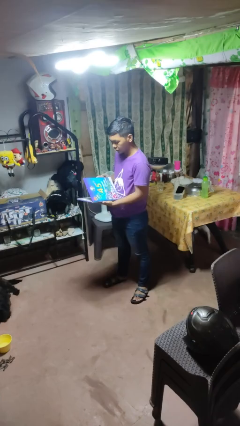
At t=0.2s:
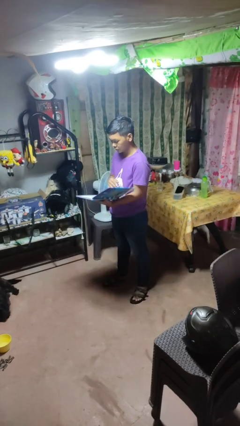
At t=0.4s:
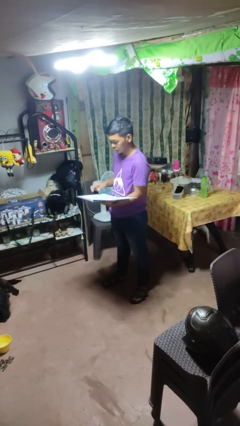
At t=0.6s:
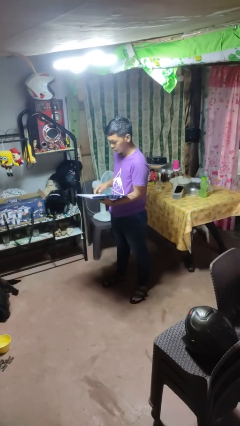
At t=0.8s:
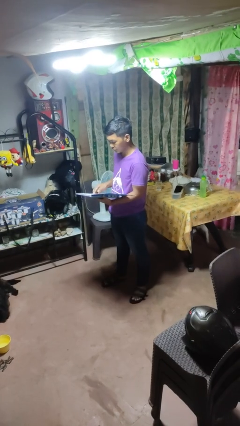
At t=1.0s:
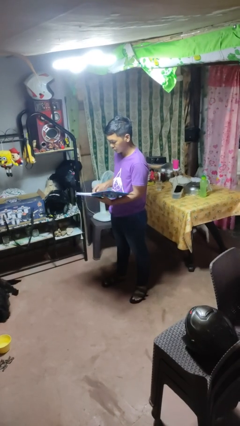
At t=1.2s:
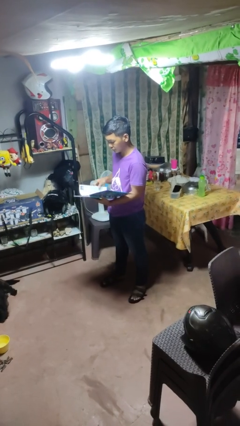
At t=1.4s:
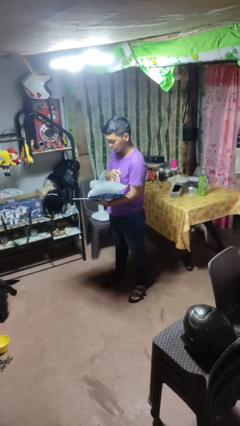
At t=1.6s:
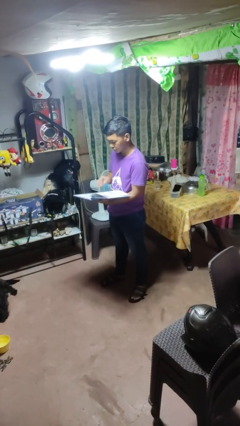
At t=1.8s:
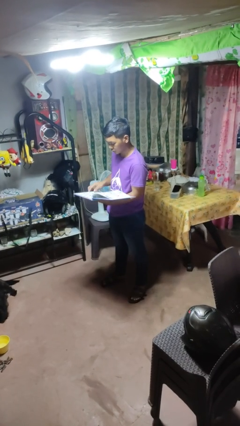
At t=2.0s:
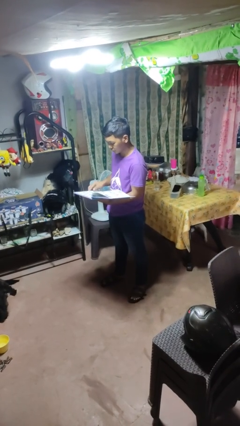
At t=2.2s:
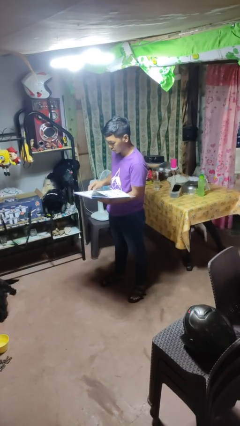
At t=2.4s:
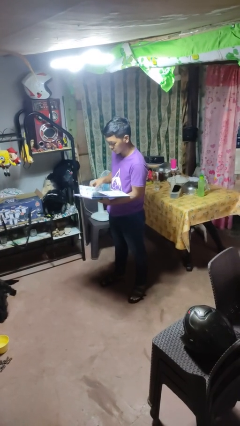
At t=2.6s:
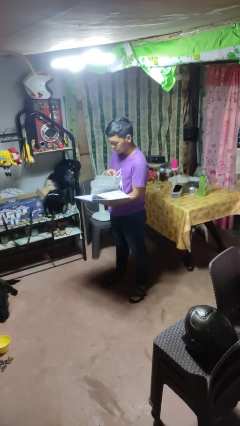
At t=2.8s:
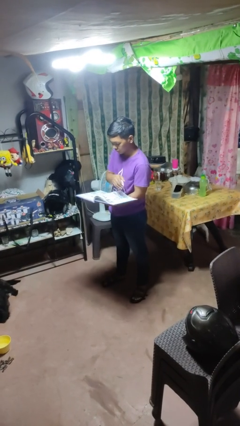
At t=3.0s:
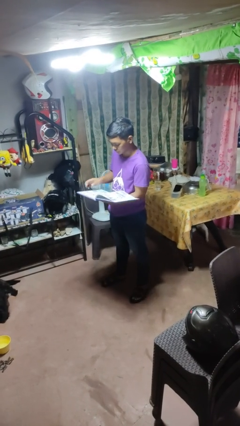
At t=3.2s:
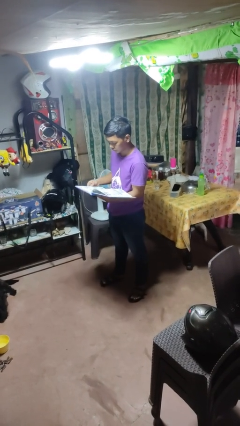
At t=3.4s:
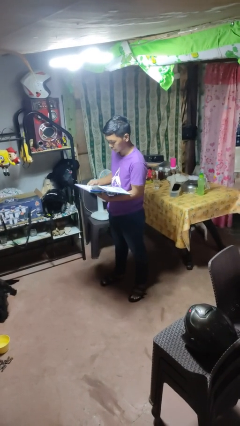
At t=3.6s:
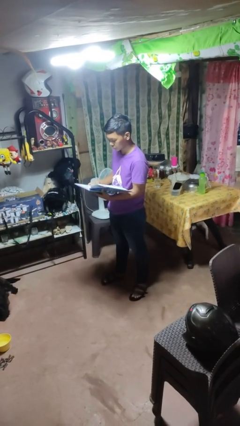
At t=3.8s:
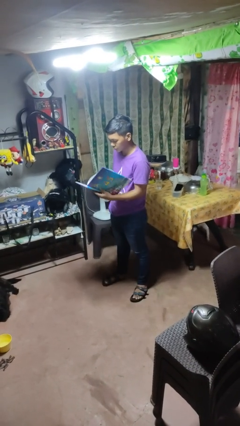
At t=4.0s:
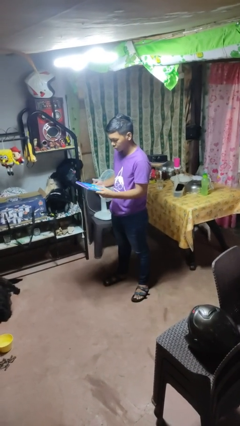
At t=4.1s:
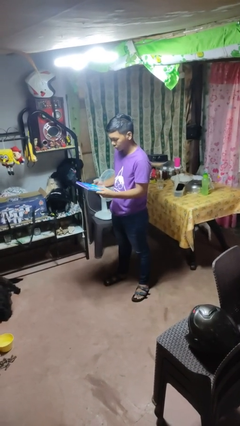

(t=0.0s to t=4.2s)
person reads magazine

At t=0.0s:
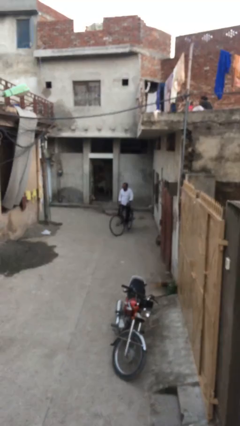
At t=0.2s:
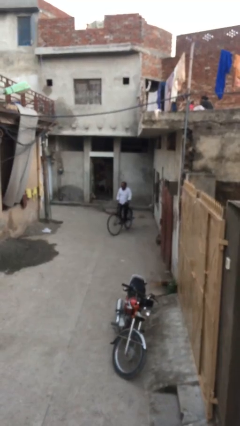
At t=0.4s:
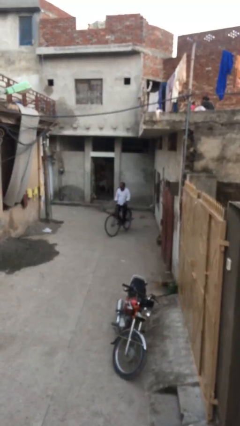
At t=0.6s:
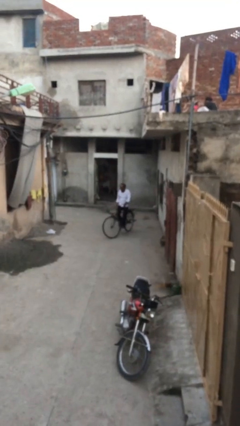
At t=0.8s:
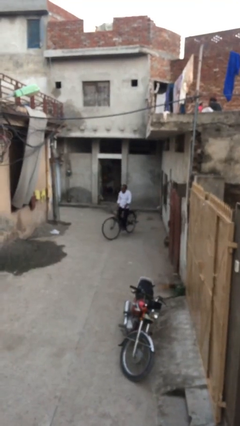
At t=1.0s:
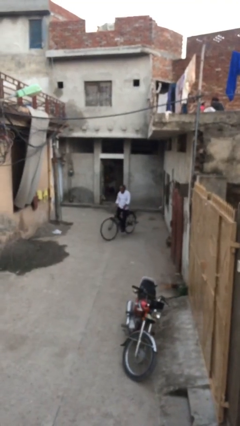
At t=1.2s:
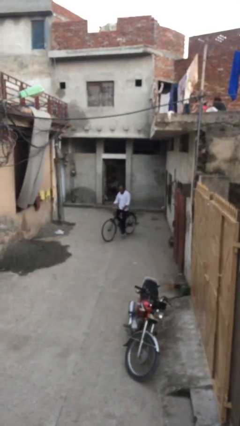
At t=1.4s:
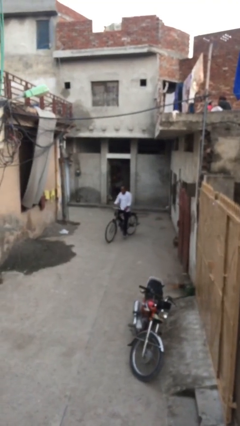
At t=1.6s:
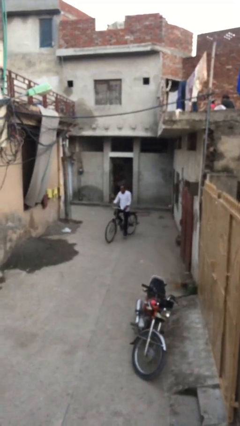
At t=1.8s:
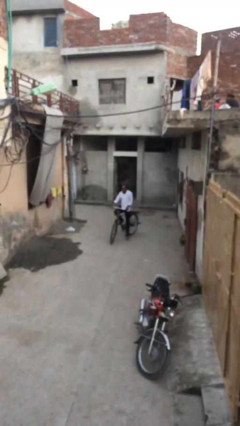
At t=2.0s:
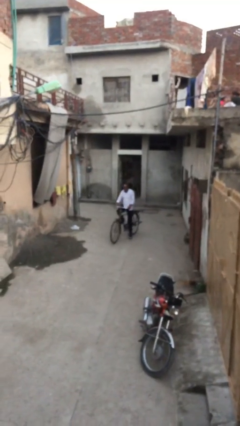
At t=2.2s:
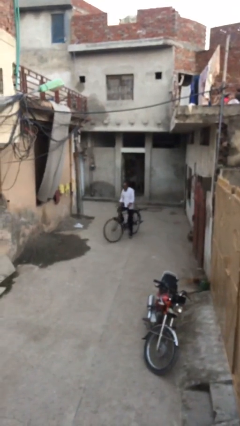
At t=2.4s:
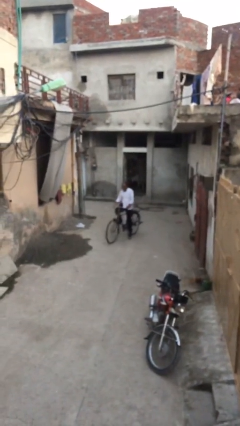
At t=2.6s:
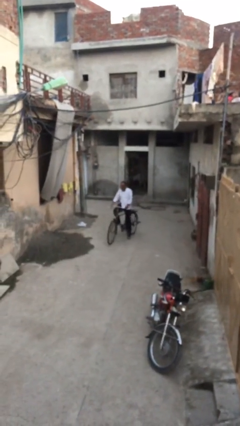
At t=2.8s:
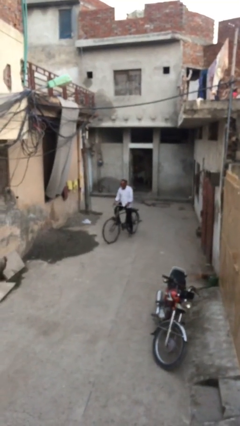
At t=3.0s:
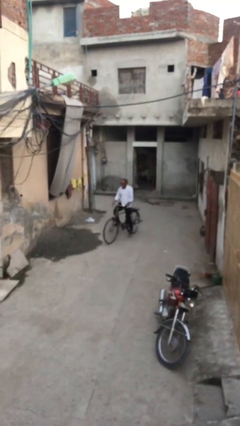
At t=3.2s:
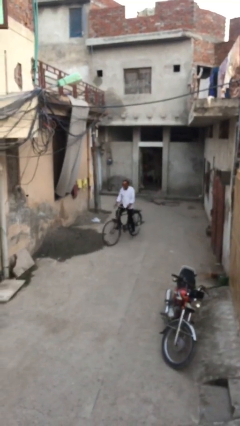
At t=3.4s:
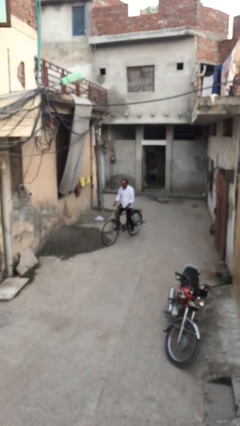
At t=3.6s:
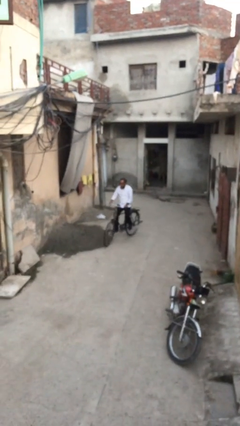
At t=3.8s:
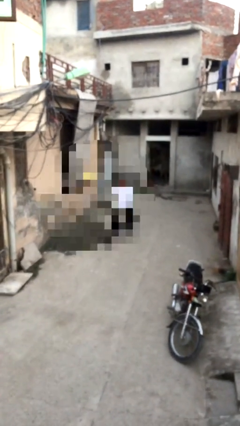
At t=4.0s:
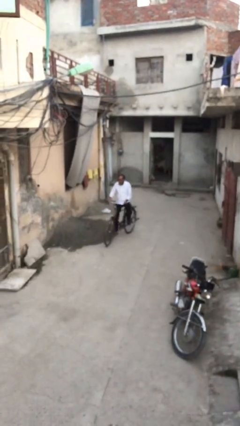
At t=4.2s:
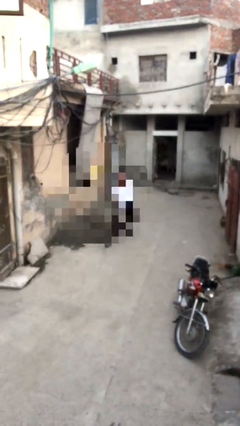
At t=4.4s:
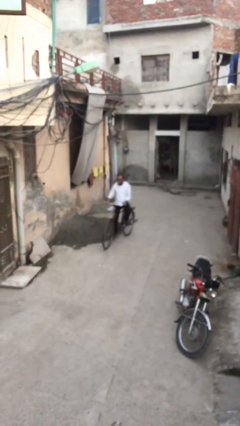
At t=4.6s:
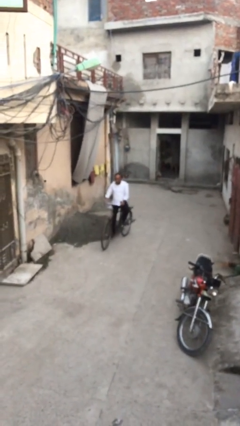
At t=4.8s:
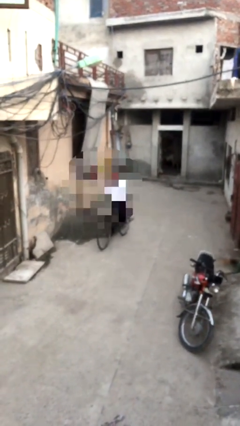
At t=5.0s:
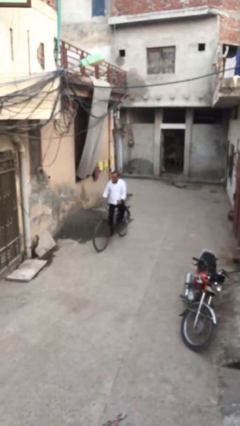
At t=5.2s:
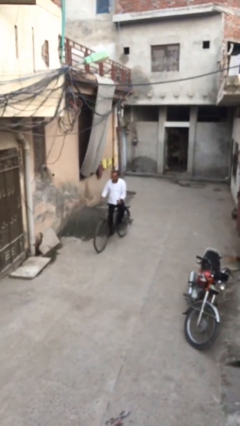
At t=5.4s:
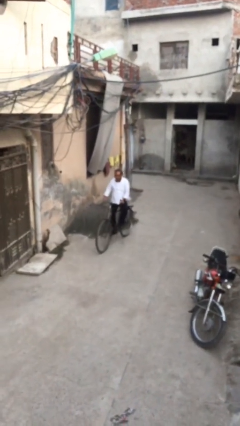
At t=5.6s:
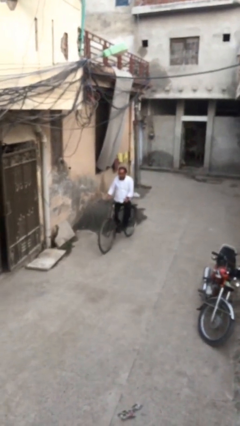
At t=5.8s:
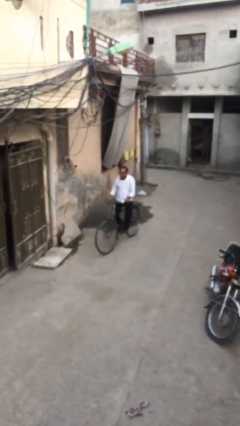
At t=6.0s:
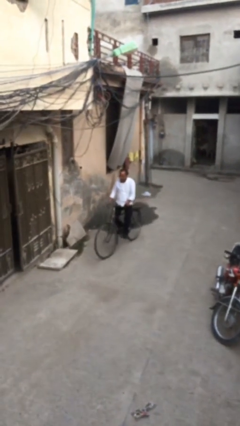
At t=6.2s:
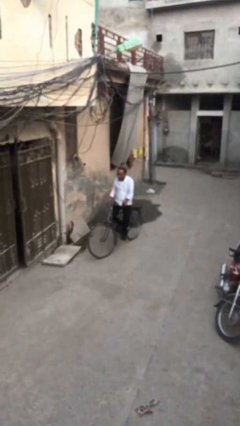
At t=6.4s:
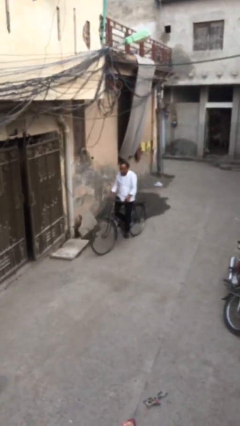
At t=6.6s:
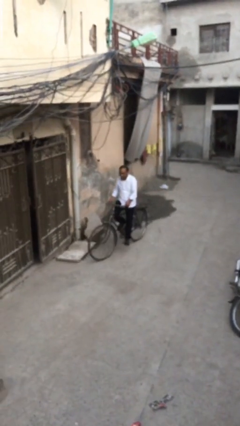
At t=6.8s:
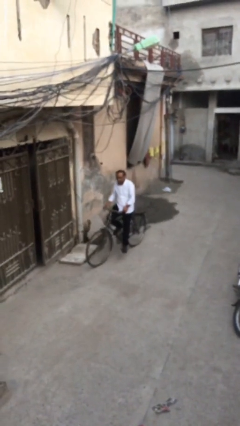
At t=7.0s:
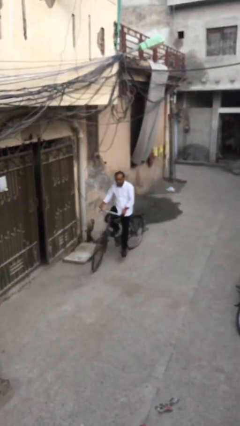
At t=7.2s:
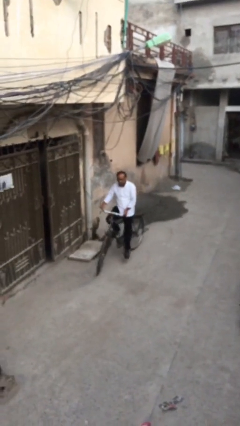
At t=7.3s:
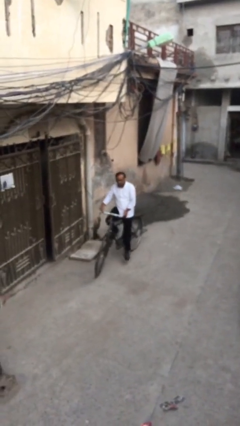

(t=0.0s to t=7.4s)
person rides bicycle

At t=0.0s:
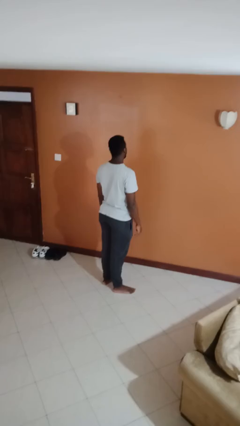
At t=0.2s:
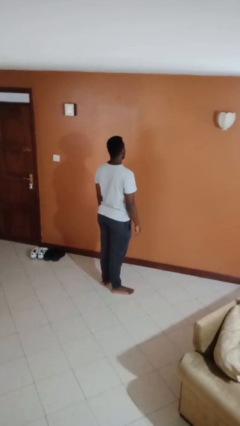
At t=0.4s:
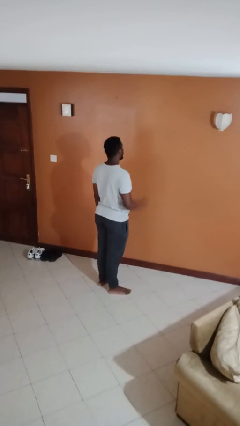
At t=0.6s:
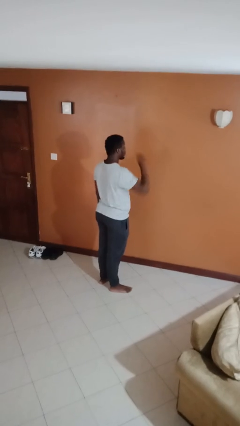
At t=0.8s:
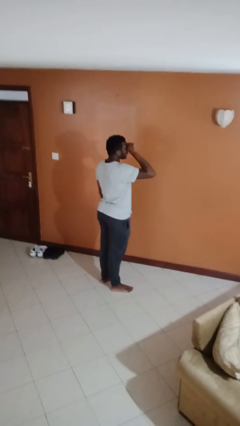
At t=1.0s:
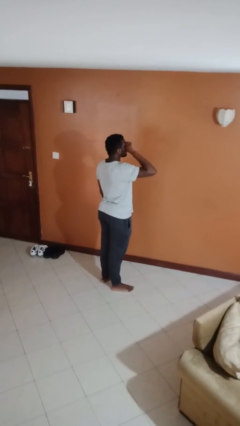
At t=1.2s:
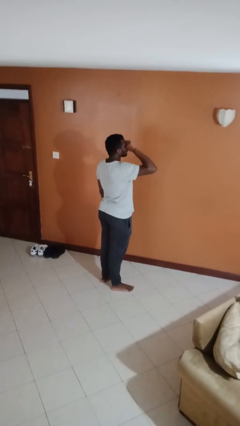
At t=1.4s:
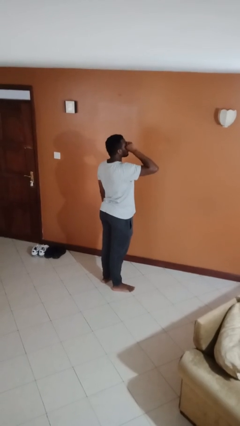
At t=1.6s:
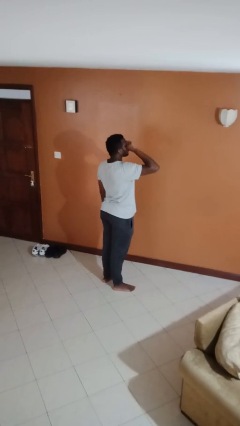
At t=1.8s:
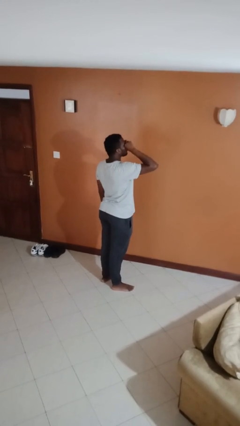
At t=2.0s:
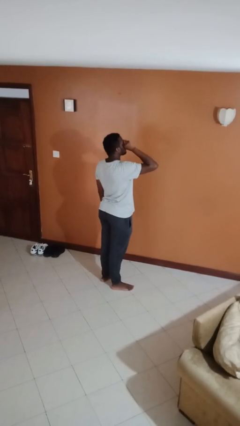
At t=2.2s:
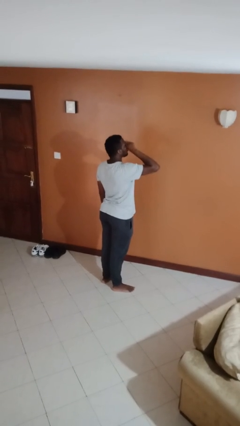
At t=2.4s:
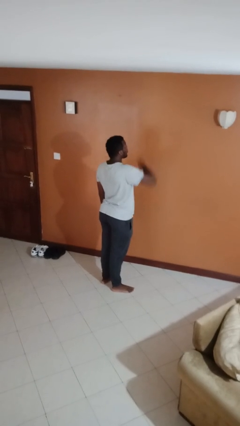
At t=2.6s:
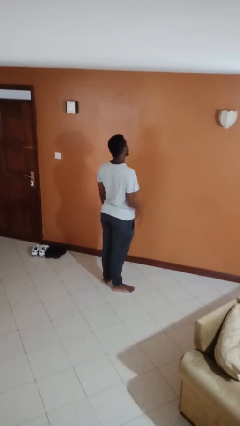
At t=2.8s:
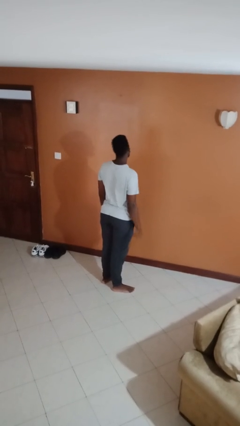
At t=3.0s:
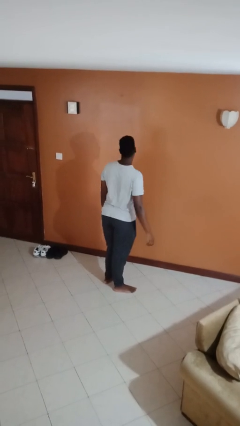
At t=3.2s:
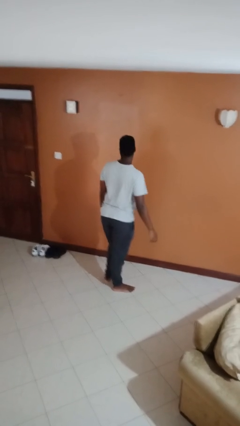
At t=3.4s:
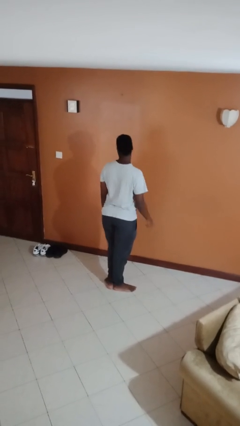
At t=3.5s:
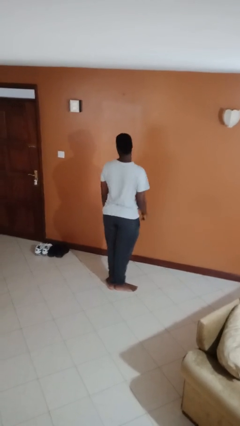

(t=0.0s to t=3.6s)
person rubs eyes

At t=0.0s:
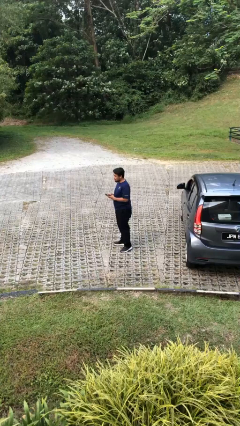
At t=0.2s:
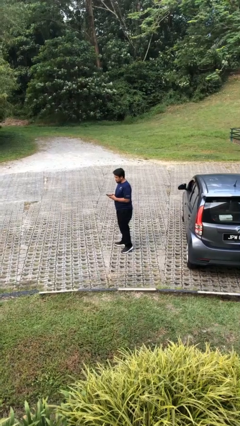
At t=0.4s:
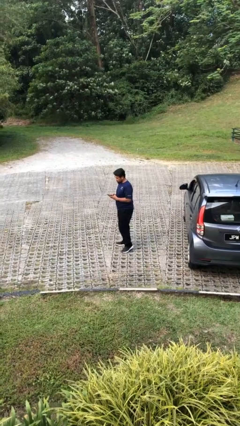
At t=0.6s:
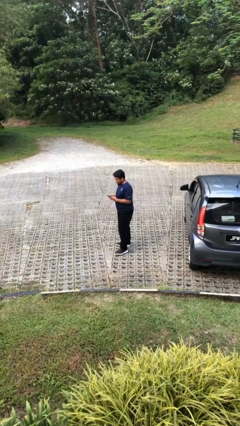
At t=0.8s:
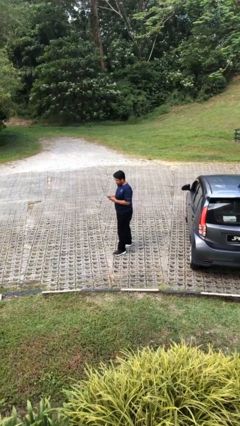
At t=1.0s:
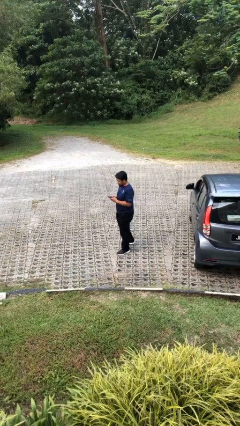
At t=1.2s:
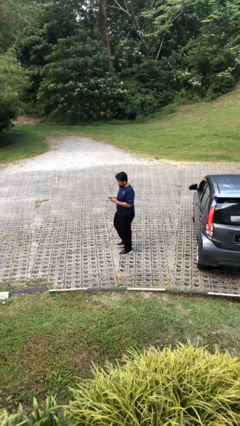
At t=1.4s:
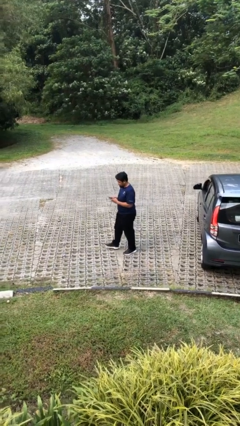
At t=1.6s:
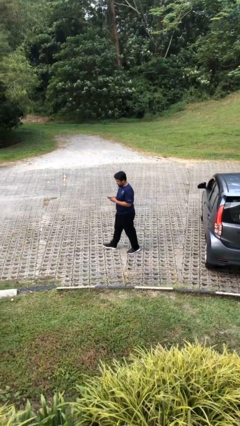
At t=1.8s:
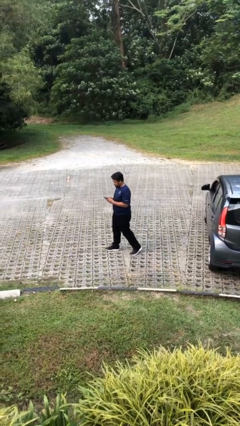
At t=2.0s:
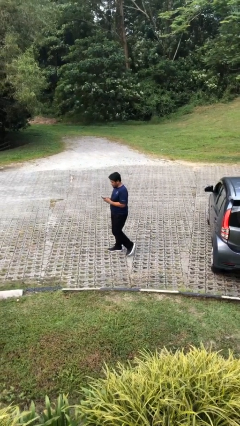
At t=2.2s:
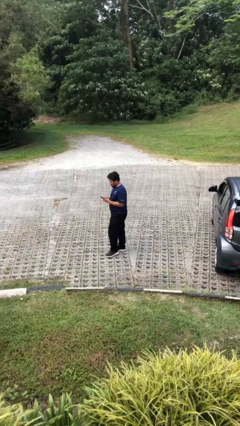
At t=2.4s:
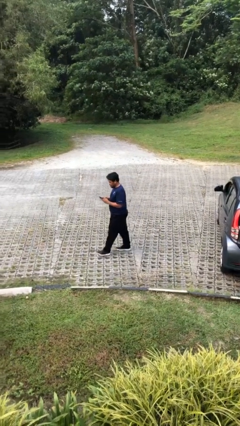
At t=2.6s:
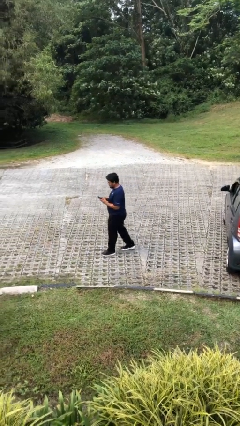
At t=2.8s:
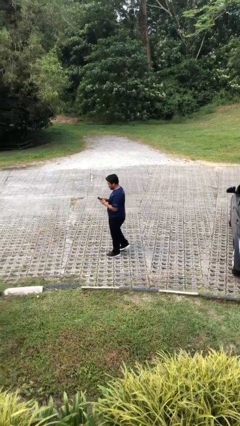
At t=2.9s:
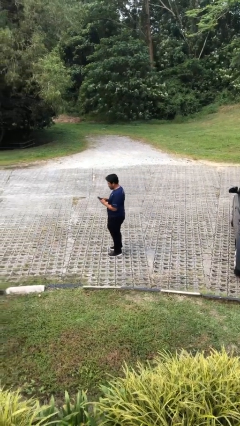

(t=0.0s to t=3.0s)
person texts on phone
